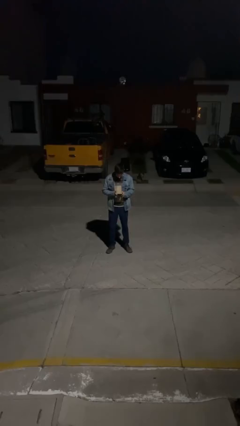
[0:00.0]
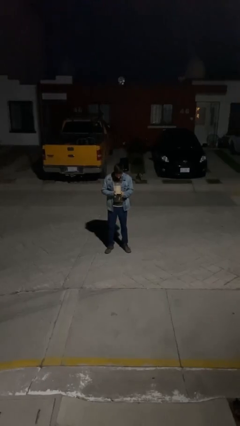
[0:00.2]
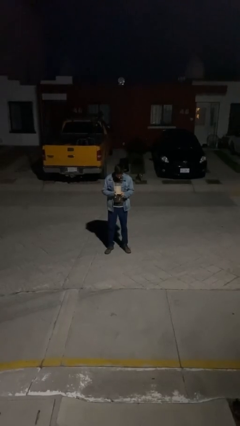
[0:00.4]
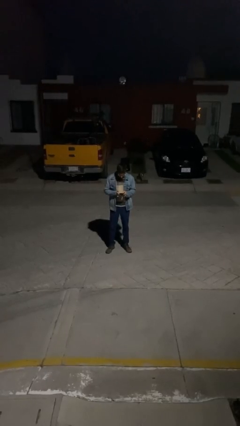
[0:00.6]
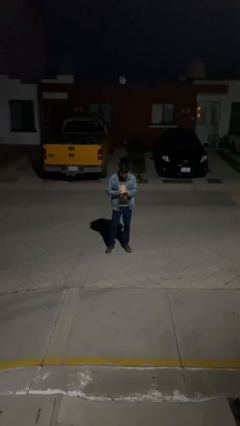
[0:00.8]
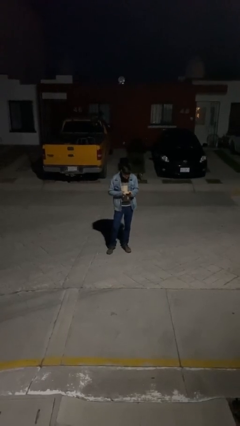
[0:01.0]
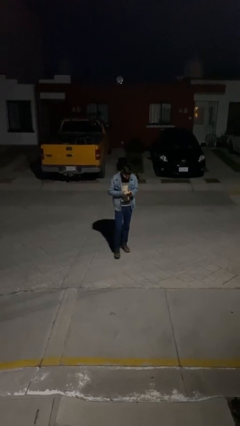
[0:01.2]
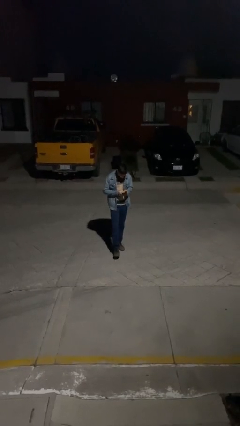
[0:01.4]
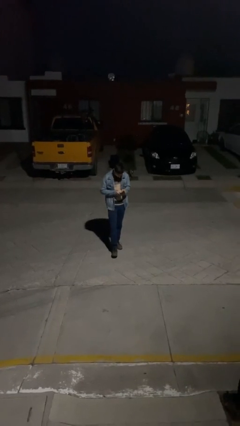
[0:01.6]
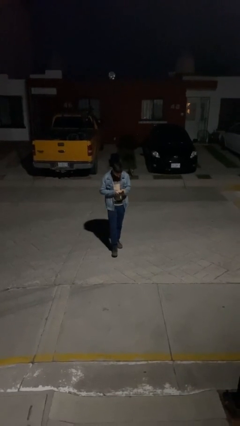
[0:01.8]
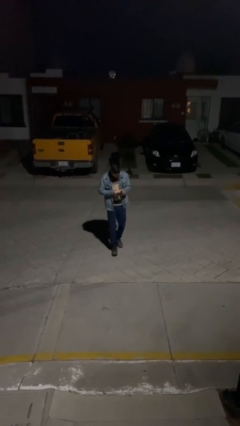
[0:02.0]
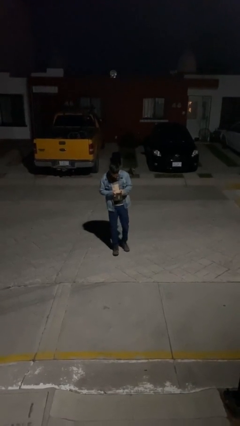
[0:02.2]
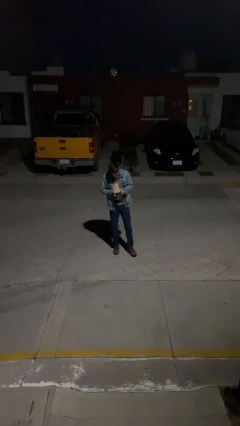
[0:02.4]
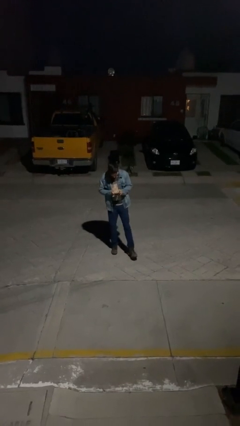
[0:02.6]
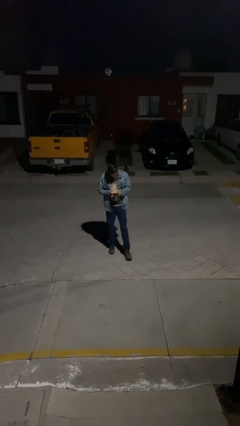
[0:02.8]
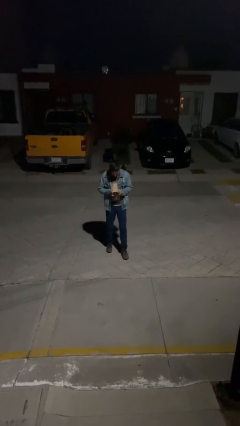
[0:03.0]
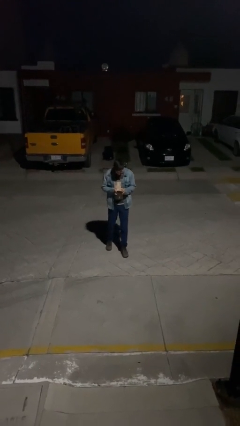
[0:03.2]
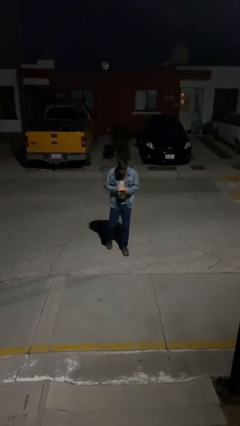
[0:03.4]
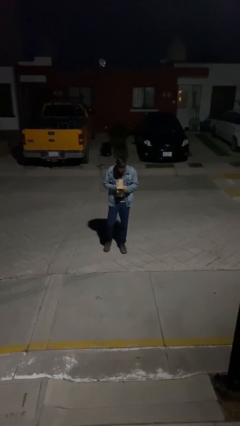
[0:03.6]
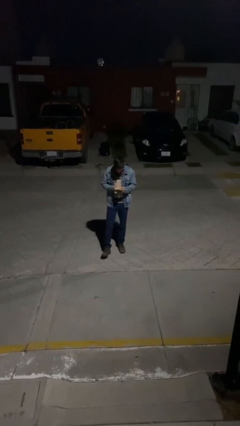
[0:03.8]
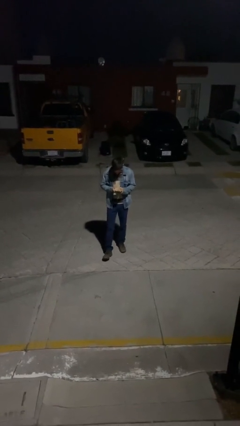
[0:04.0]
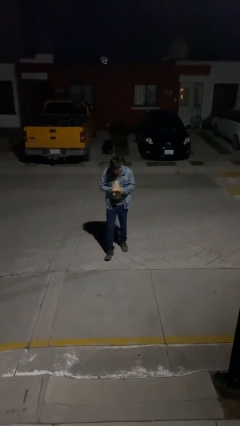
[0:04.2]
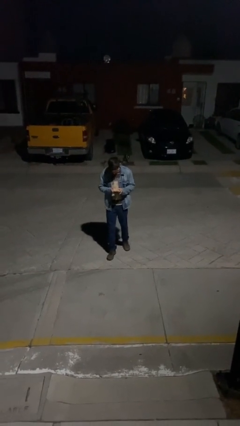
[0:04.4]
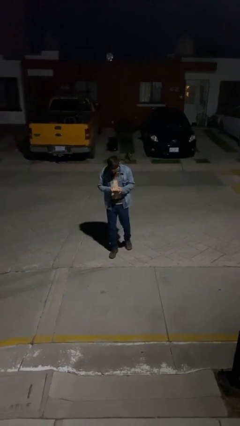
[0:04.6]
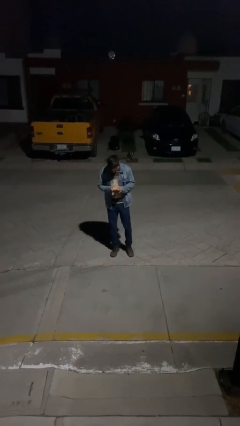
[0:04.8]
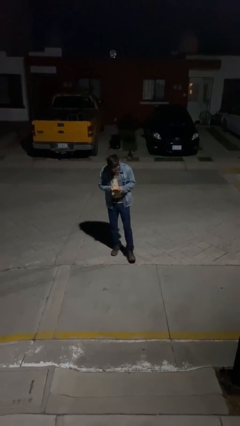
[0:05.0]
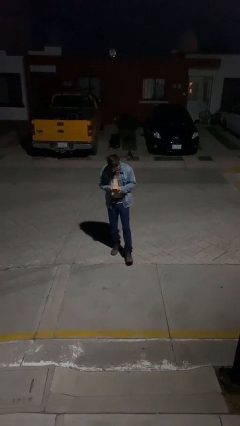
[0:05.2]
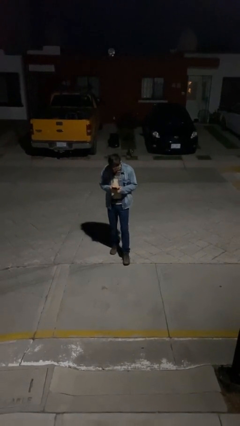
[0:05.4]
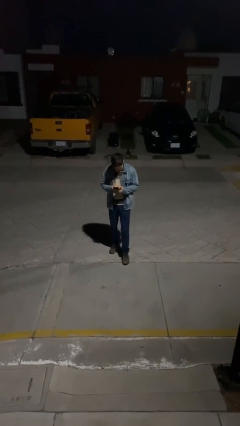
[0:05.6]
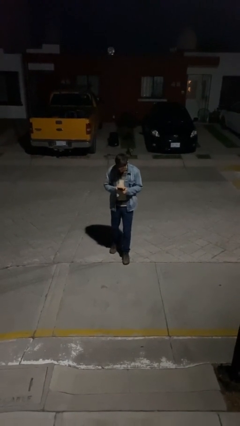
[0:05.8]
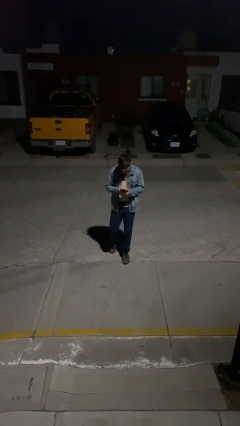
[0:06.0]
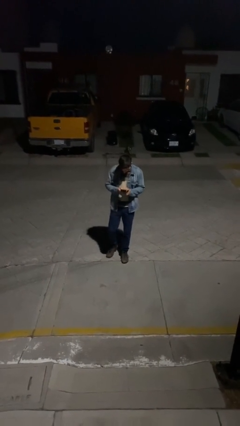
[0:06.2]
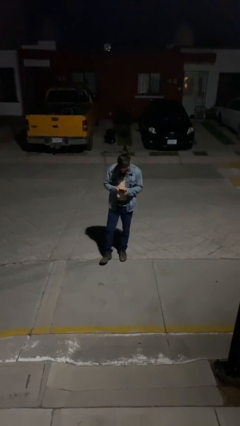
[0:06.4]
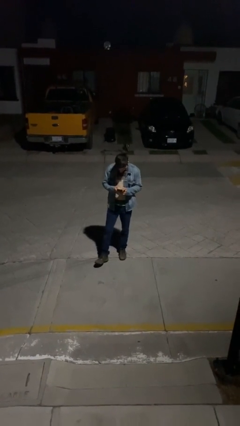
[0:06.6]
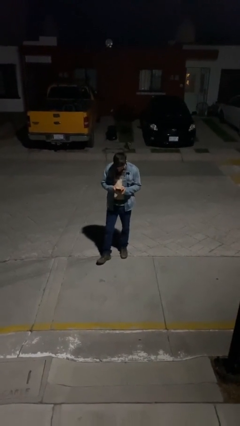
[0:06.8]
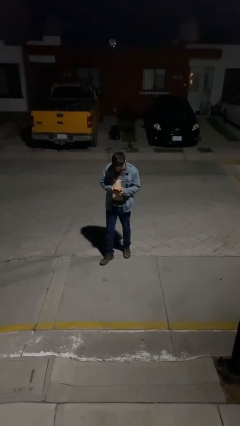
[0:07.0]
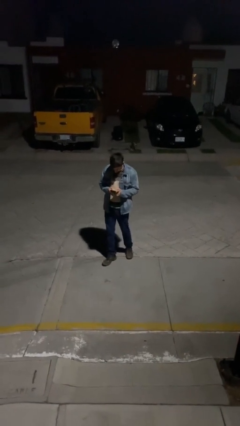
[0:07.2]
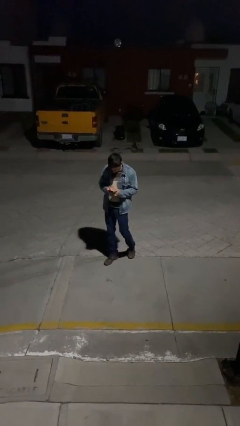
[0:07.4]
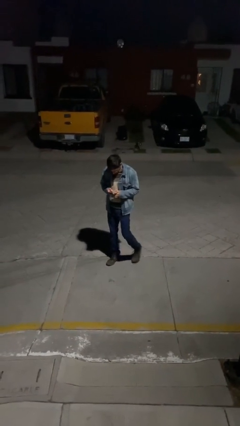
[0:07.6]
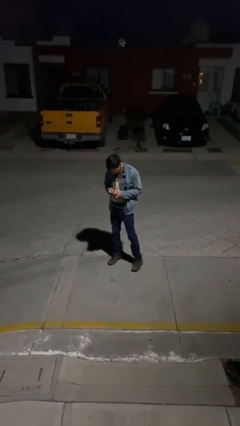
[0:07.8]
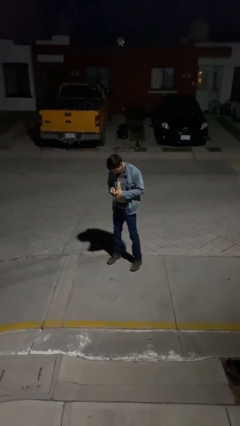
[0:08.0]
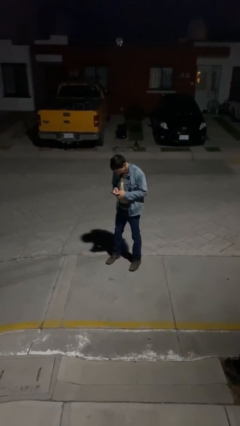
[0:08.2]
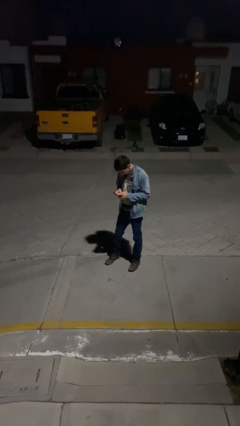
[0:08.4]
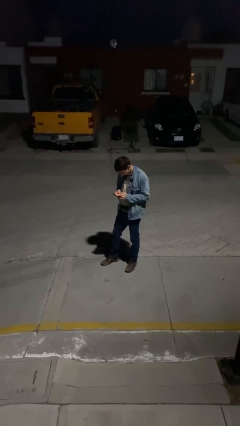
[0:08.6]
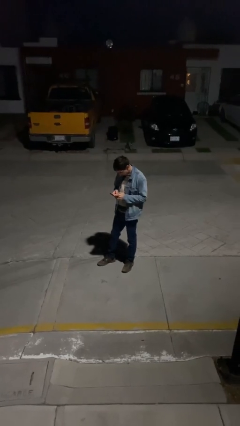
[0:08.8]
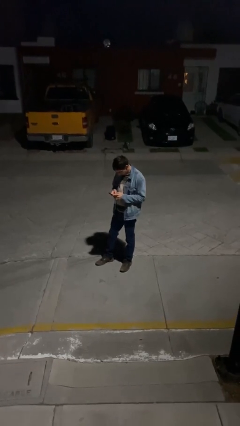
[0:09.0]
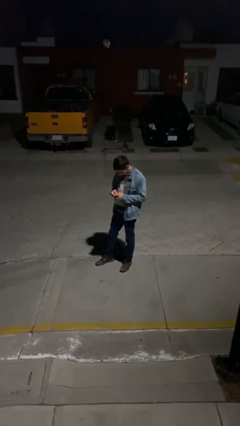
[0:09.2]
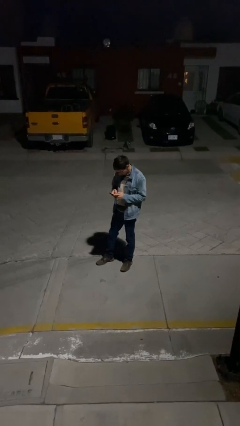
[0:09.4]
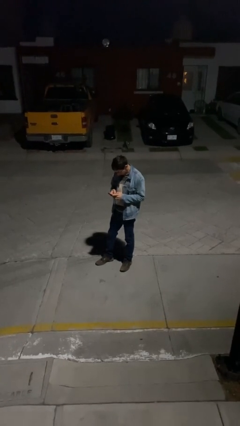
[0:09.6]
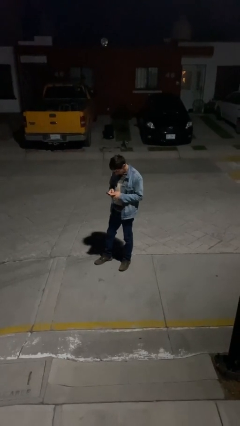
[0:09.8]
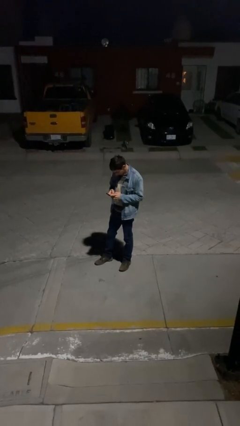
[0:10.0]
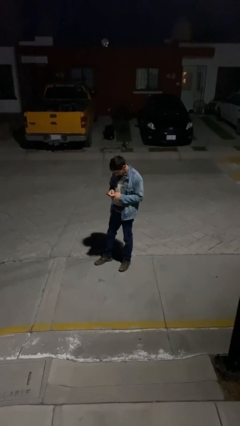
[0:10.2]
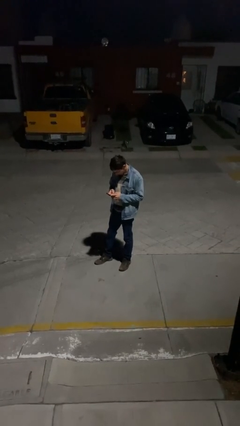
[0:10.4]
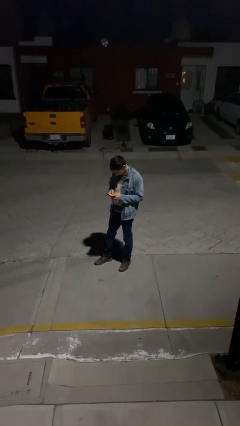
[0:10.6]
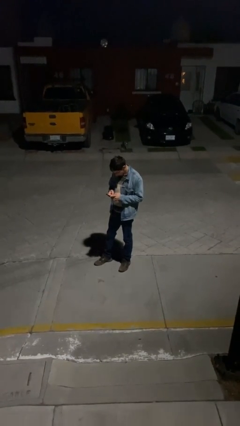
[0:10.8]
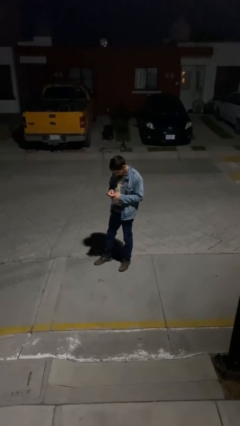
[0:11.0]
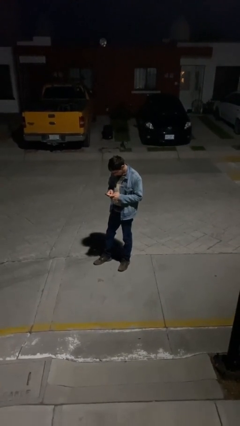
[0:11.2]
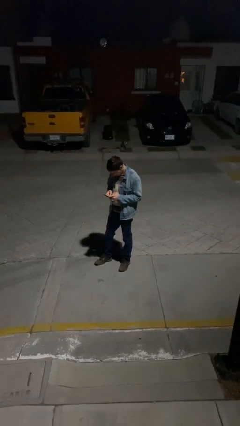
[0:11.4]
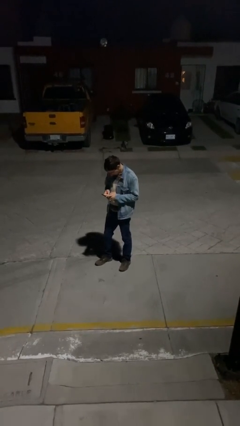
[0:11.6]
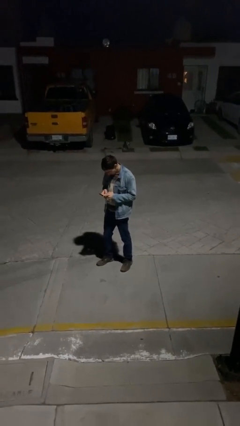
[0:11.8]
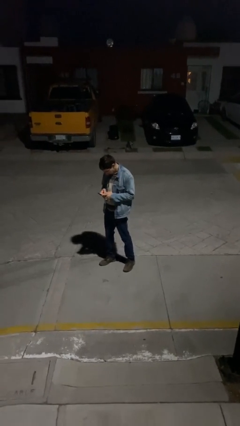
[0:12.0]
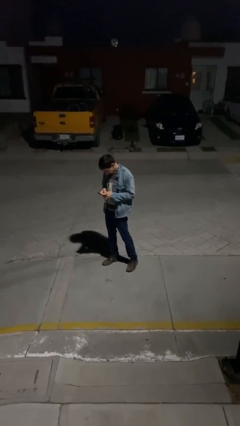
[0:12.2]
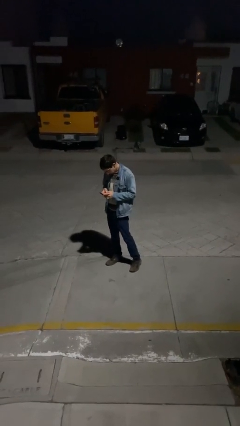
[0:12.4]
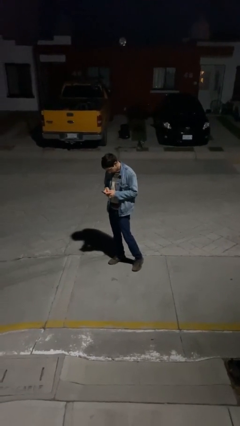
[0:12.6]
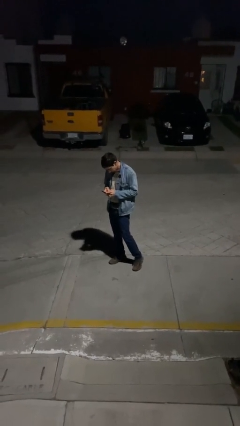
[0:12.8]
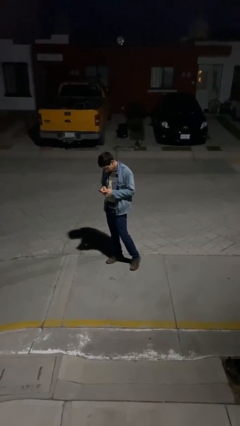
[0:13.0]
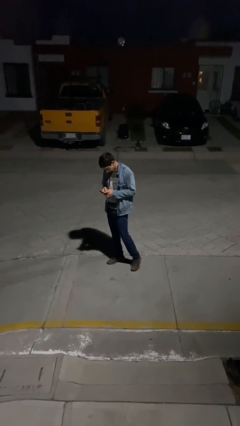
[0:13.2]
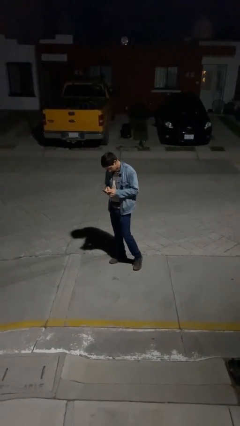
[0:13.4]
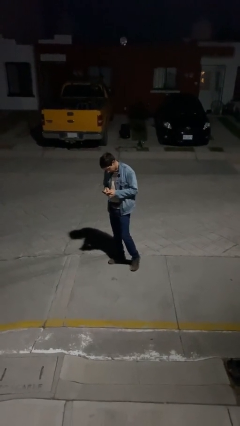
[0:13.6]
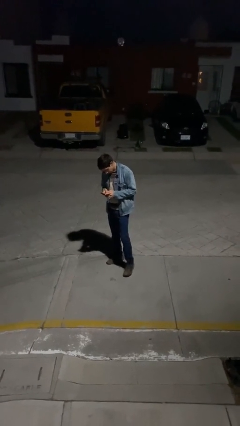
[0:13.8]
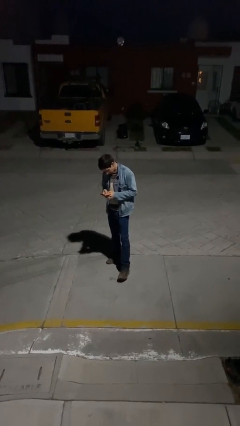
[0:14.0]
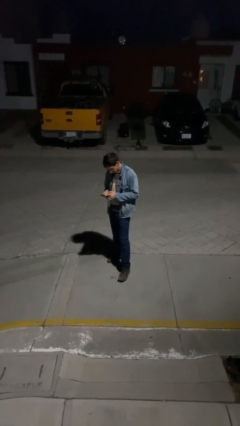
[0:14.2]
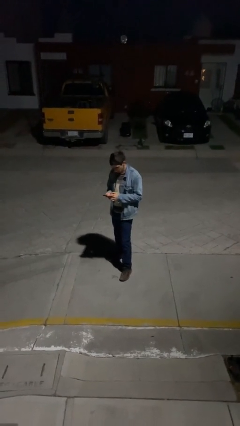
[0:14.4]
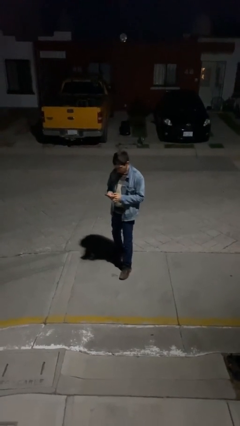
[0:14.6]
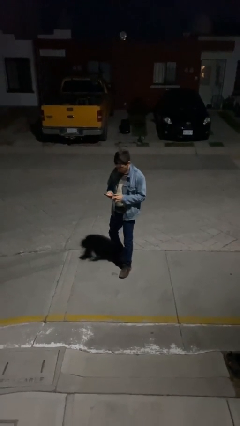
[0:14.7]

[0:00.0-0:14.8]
person texts on phone

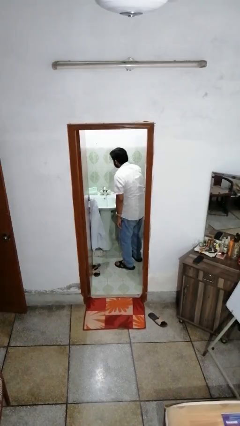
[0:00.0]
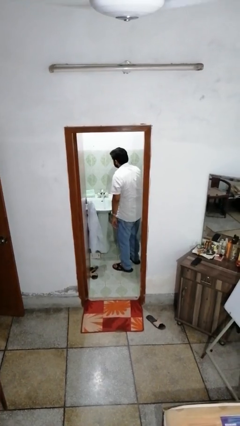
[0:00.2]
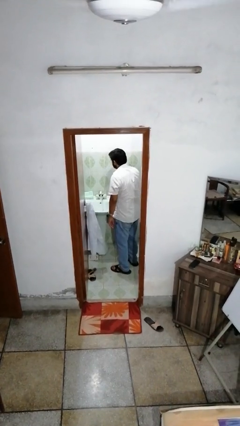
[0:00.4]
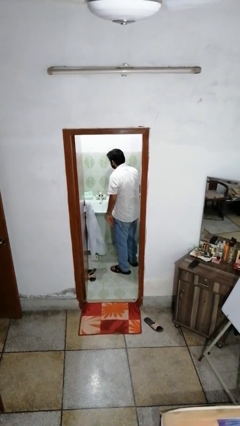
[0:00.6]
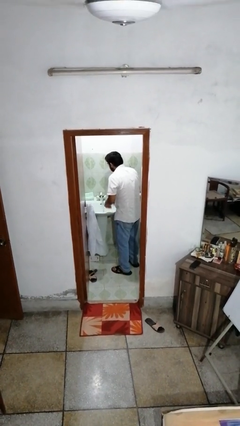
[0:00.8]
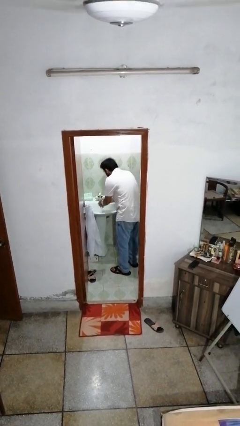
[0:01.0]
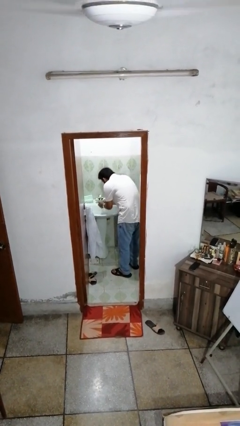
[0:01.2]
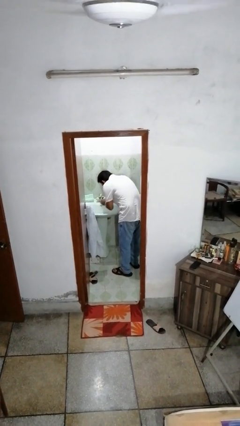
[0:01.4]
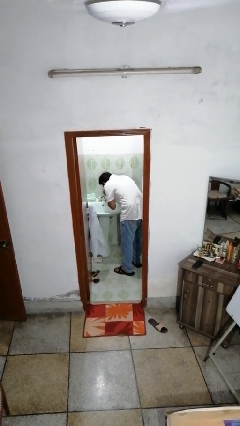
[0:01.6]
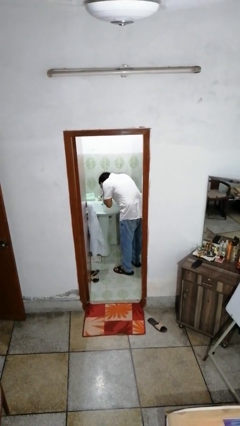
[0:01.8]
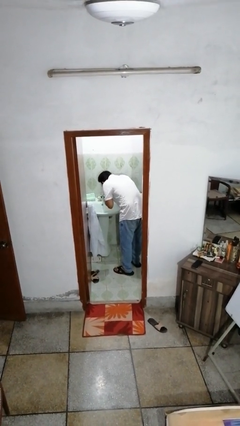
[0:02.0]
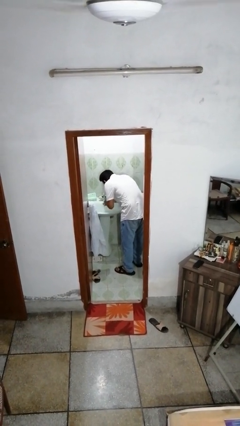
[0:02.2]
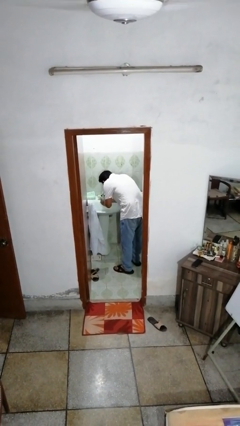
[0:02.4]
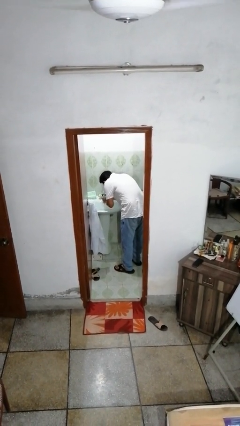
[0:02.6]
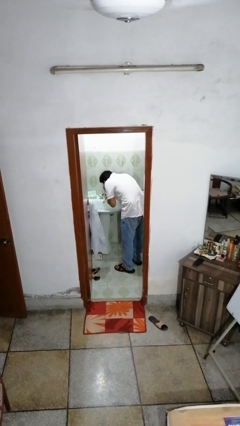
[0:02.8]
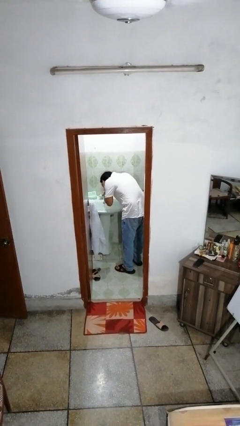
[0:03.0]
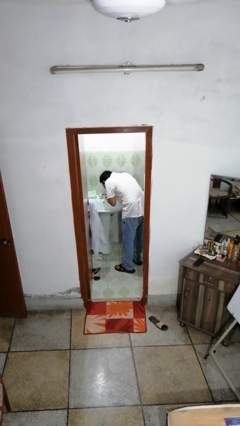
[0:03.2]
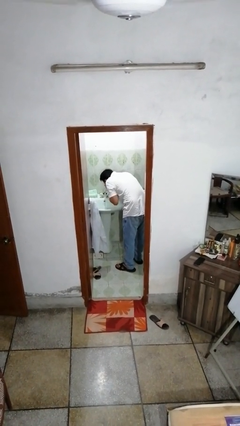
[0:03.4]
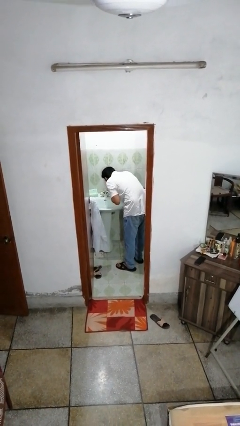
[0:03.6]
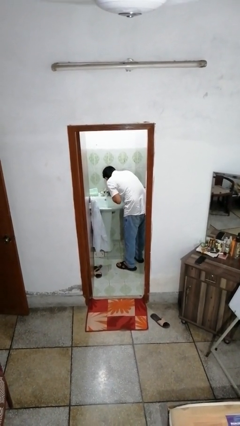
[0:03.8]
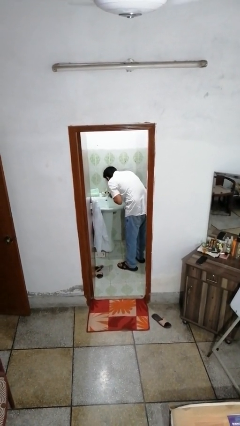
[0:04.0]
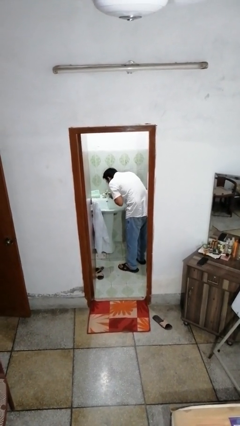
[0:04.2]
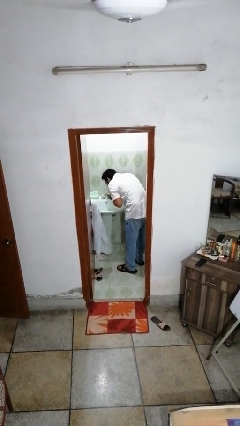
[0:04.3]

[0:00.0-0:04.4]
person washes face
